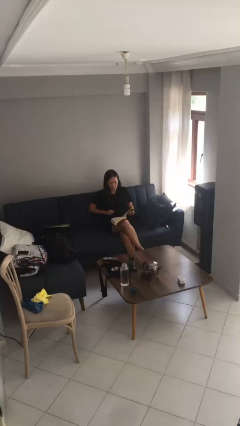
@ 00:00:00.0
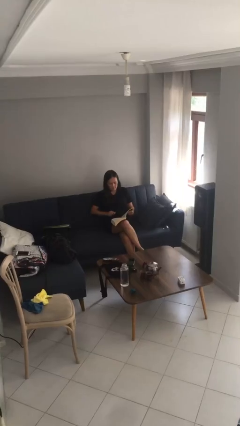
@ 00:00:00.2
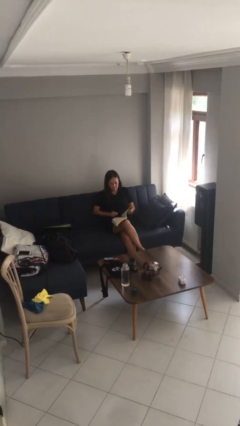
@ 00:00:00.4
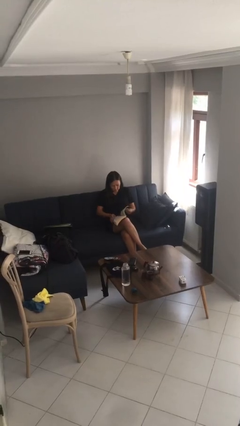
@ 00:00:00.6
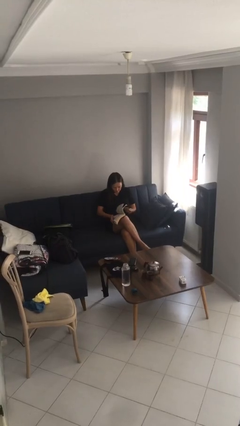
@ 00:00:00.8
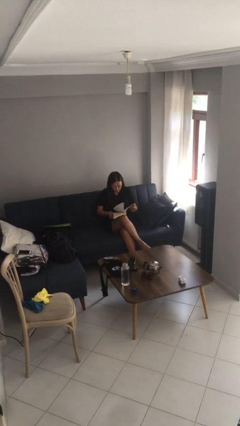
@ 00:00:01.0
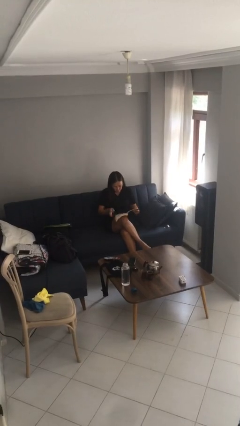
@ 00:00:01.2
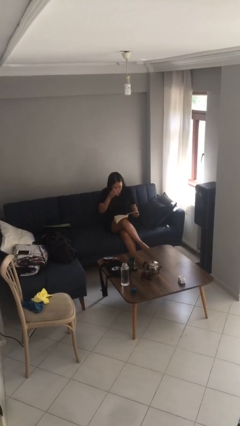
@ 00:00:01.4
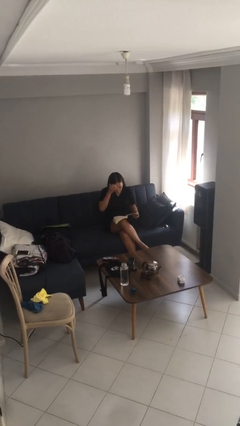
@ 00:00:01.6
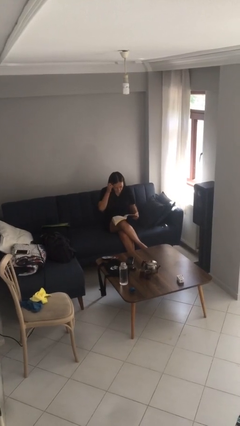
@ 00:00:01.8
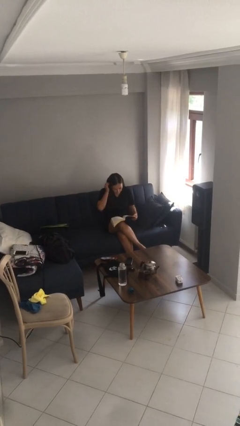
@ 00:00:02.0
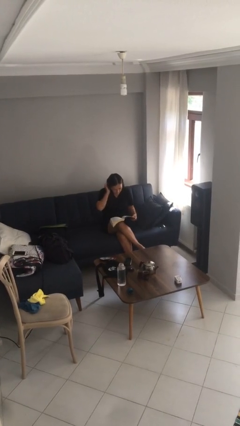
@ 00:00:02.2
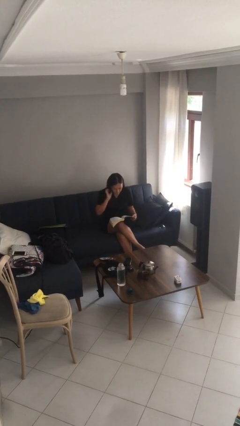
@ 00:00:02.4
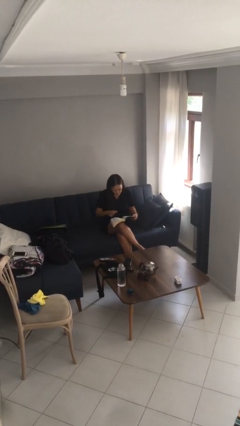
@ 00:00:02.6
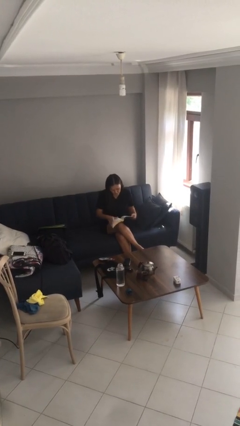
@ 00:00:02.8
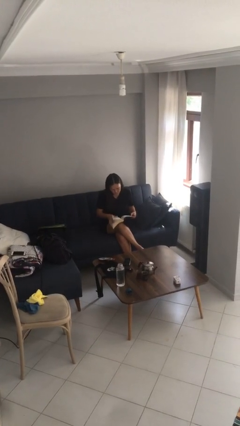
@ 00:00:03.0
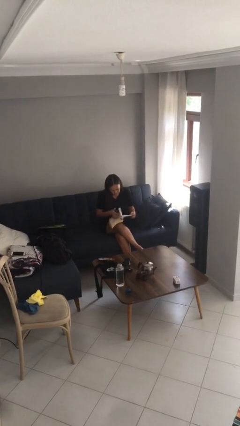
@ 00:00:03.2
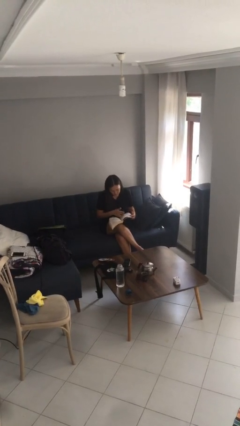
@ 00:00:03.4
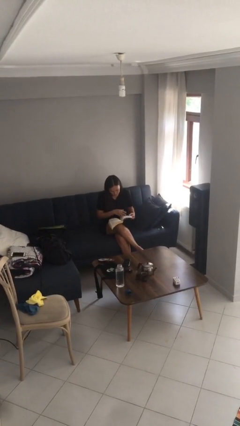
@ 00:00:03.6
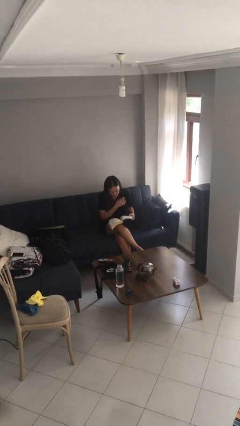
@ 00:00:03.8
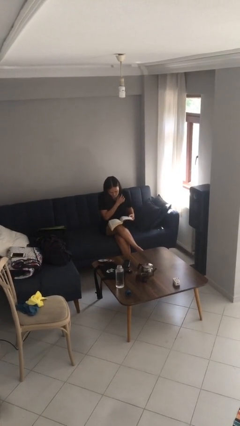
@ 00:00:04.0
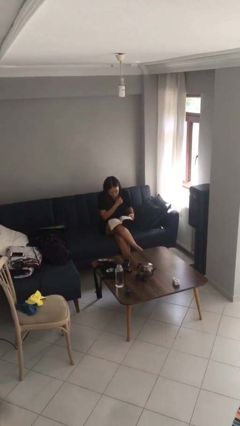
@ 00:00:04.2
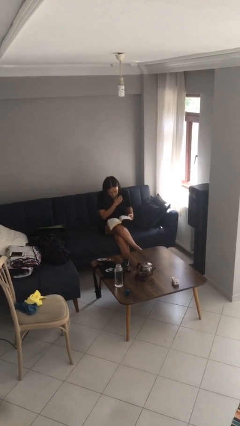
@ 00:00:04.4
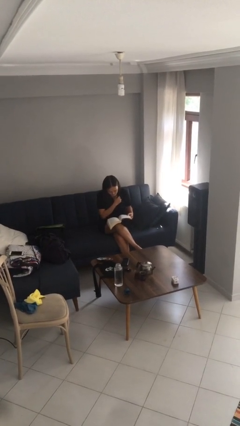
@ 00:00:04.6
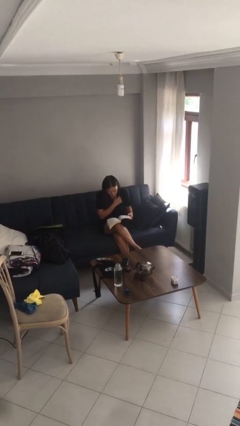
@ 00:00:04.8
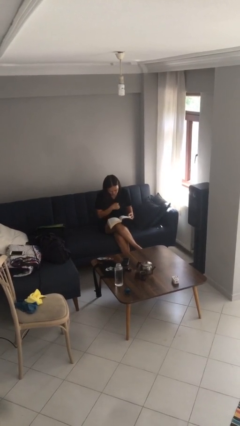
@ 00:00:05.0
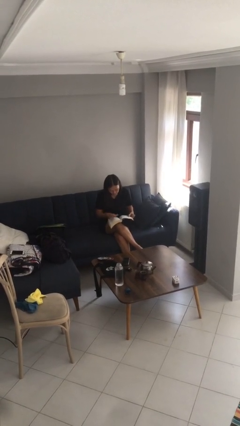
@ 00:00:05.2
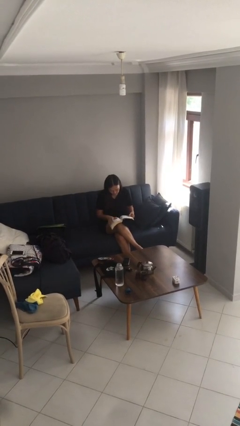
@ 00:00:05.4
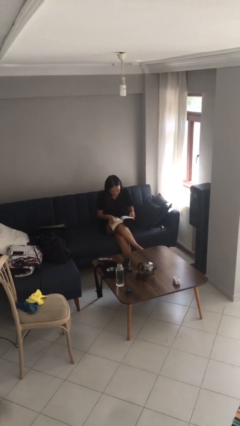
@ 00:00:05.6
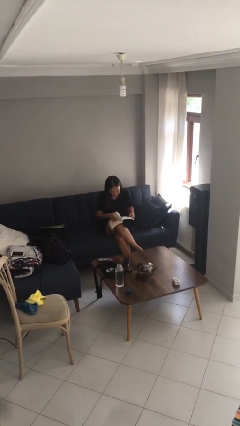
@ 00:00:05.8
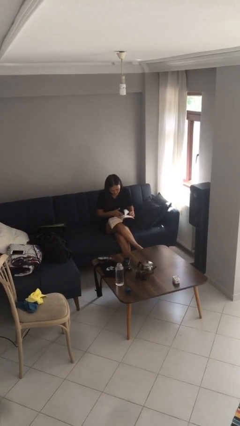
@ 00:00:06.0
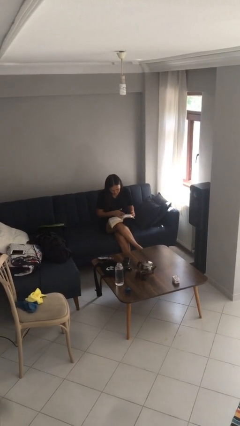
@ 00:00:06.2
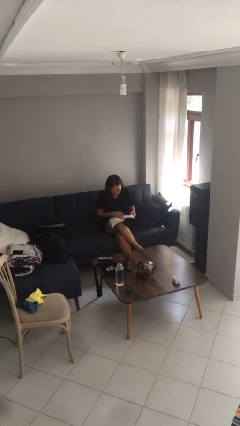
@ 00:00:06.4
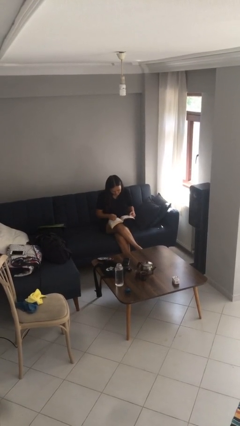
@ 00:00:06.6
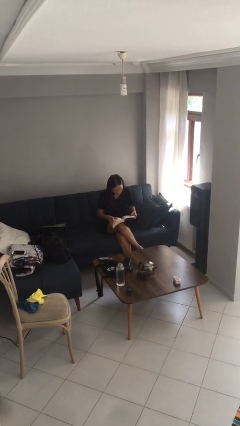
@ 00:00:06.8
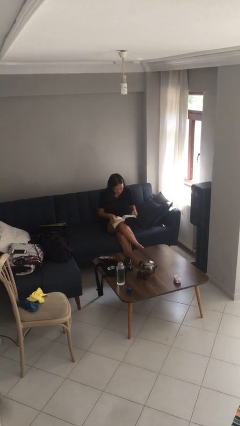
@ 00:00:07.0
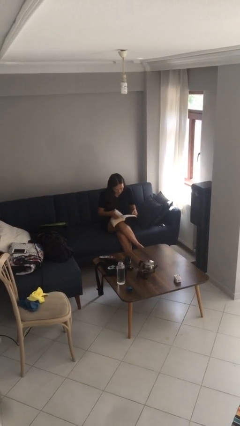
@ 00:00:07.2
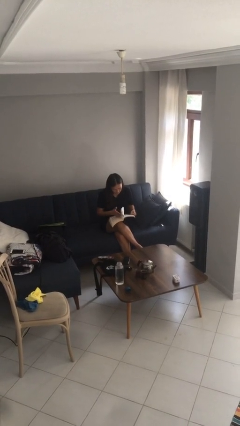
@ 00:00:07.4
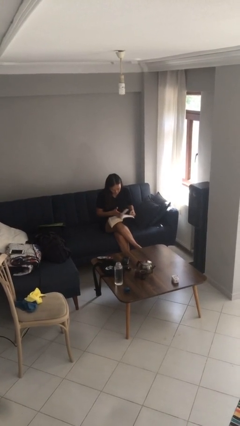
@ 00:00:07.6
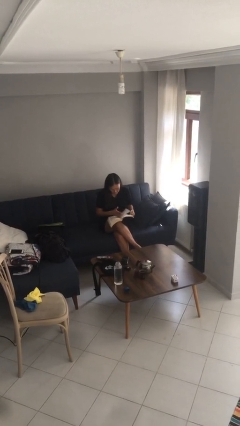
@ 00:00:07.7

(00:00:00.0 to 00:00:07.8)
person reads document

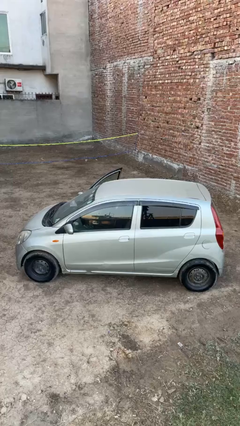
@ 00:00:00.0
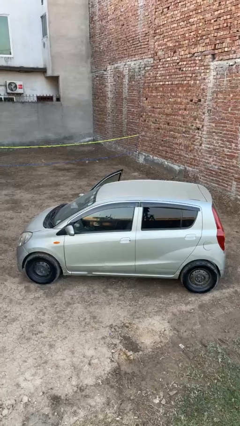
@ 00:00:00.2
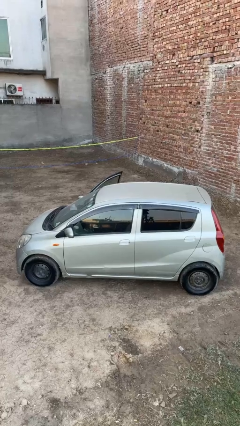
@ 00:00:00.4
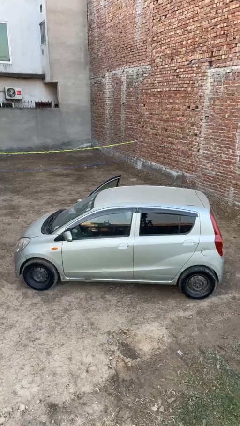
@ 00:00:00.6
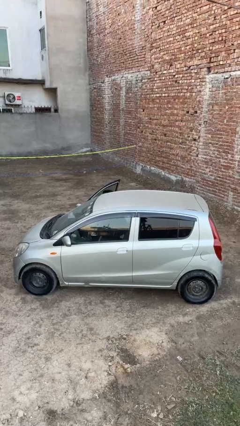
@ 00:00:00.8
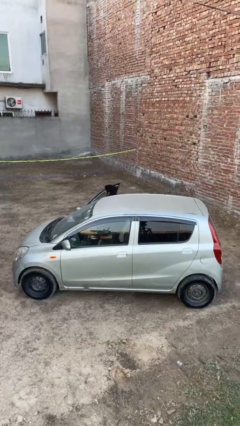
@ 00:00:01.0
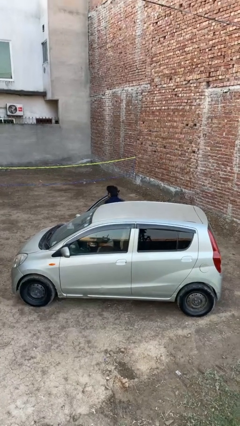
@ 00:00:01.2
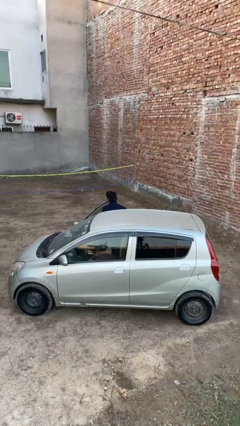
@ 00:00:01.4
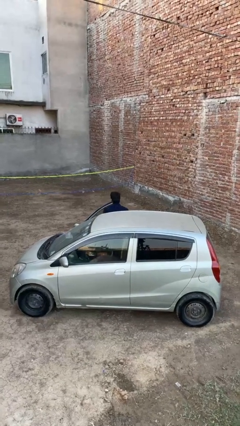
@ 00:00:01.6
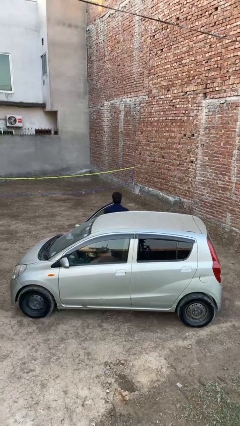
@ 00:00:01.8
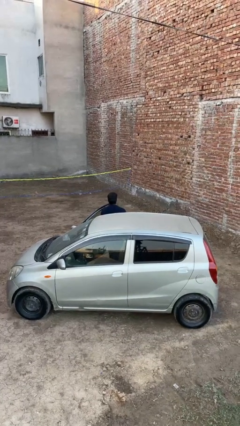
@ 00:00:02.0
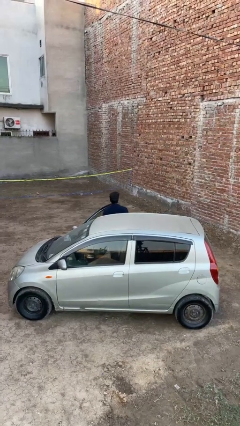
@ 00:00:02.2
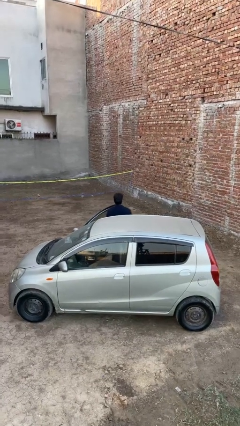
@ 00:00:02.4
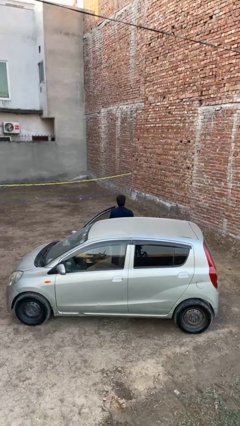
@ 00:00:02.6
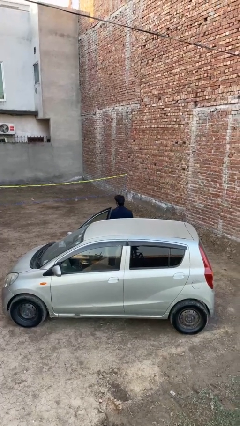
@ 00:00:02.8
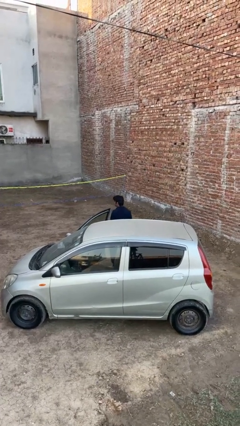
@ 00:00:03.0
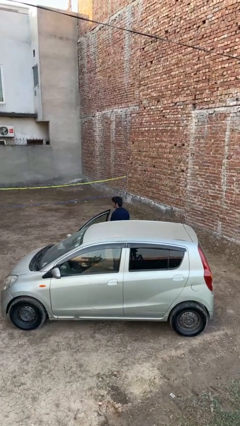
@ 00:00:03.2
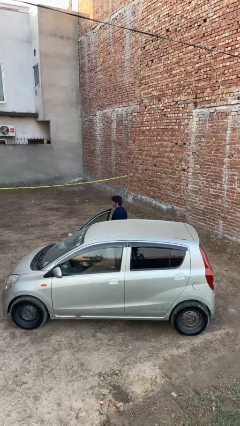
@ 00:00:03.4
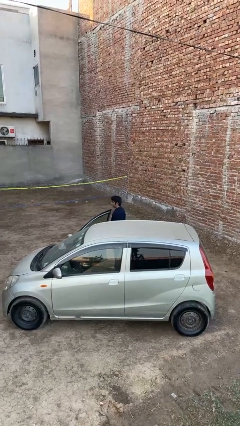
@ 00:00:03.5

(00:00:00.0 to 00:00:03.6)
person exits car

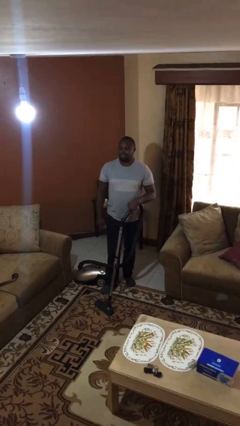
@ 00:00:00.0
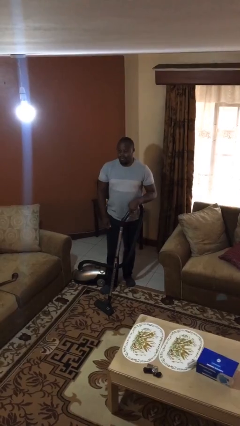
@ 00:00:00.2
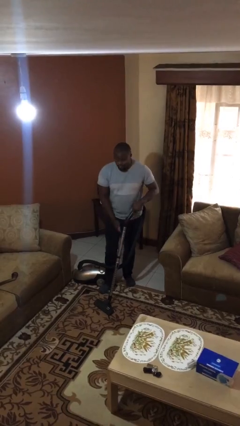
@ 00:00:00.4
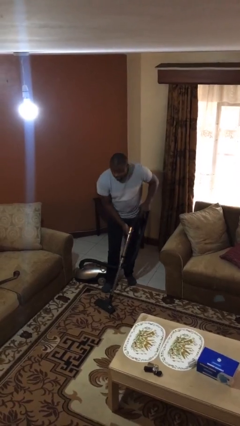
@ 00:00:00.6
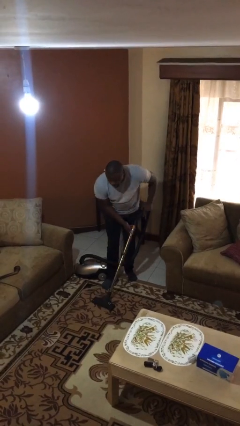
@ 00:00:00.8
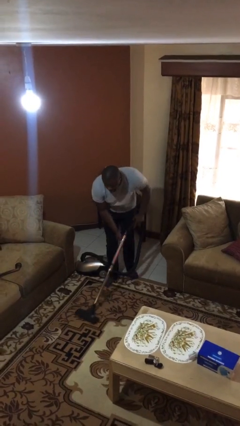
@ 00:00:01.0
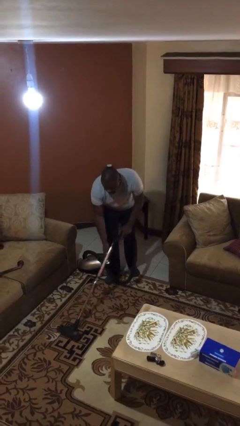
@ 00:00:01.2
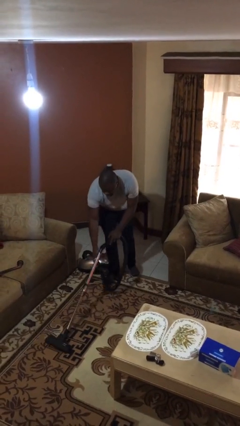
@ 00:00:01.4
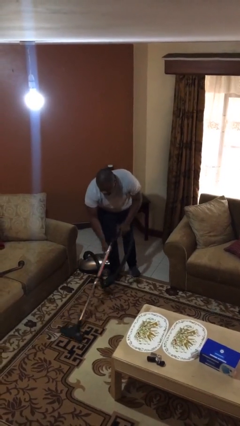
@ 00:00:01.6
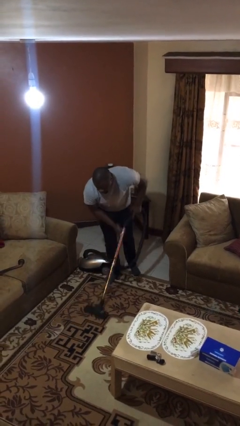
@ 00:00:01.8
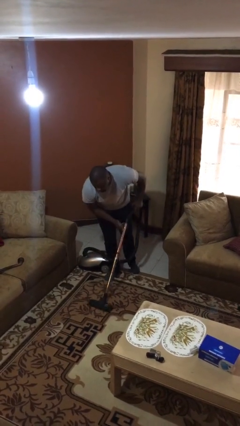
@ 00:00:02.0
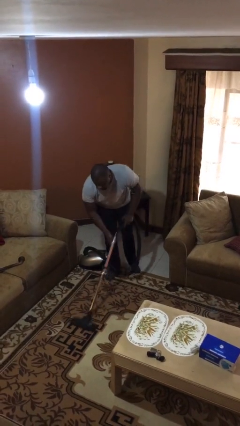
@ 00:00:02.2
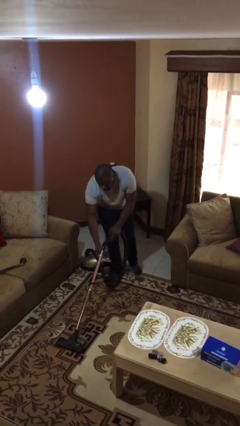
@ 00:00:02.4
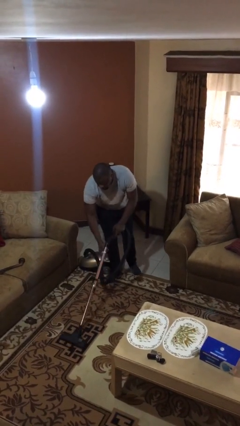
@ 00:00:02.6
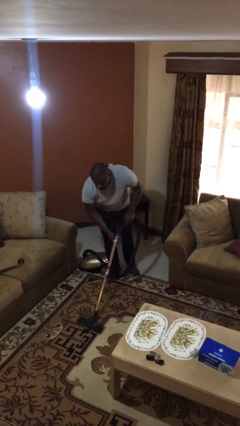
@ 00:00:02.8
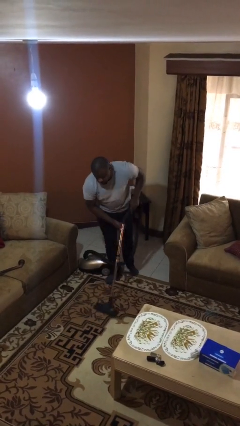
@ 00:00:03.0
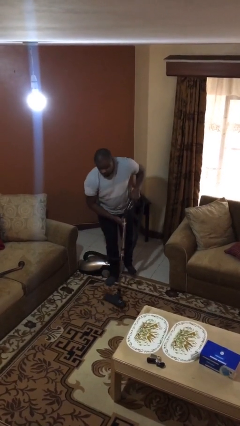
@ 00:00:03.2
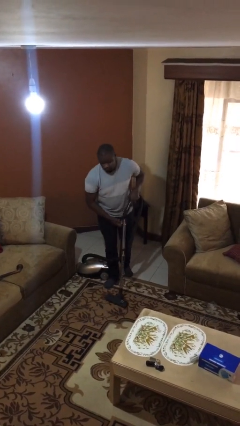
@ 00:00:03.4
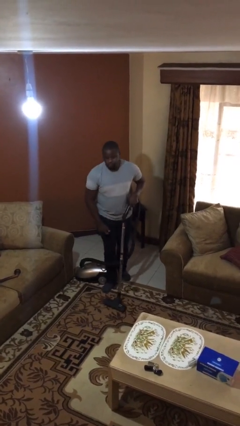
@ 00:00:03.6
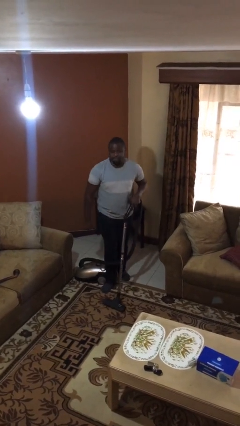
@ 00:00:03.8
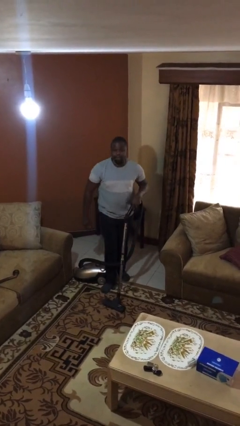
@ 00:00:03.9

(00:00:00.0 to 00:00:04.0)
person vacuums carpet

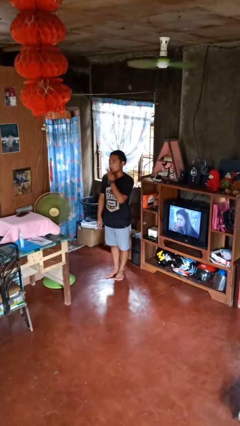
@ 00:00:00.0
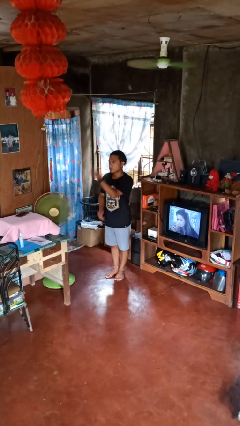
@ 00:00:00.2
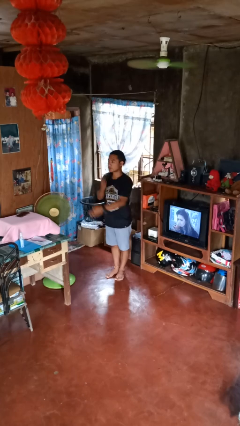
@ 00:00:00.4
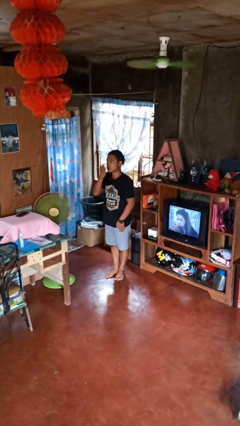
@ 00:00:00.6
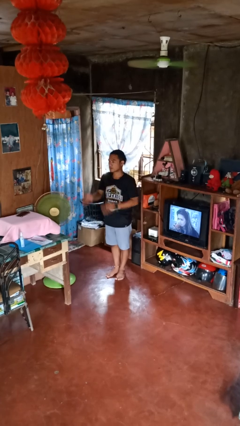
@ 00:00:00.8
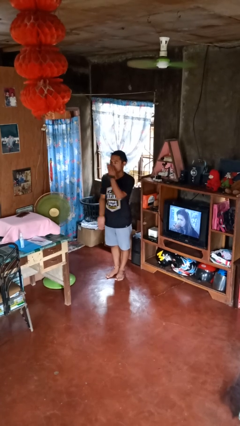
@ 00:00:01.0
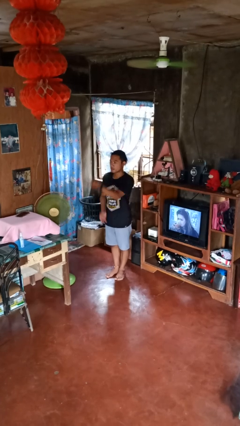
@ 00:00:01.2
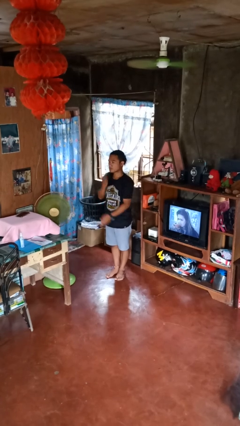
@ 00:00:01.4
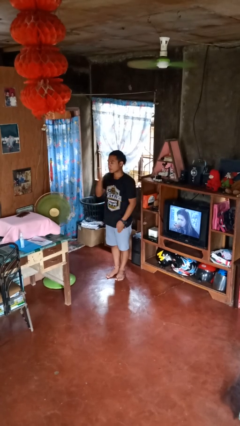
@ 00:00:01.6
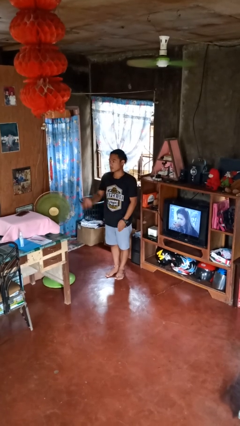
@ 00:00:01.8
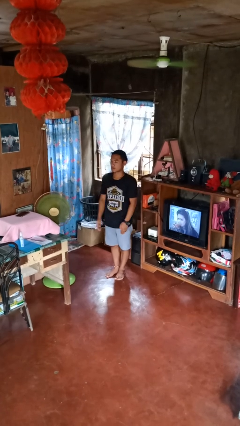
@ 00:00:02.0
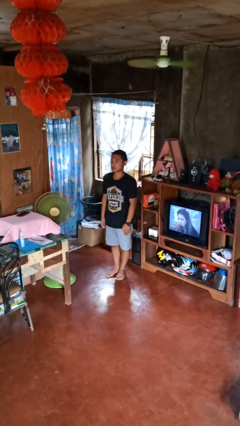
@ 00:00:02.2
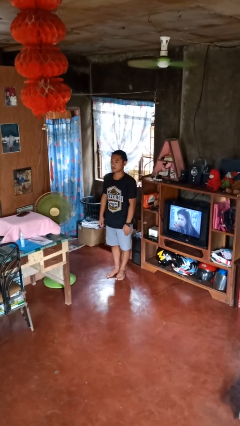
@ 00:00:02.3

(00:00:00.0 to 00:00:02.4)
person gestures blow kiss
